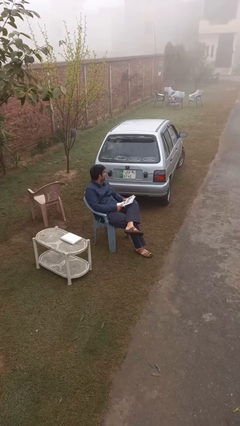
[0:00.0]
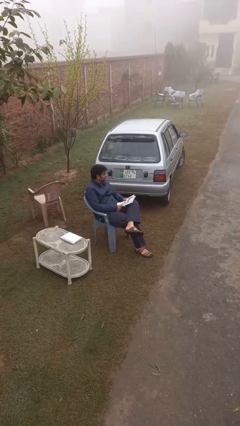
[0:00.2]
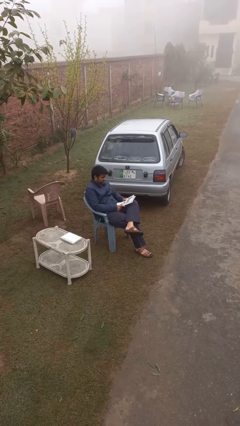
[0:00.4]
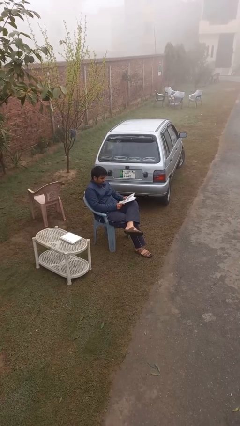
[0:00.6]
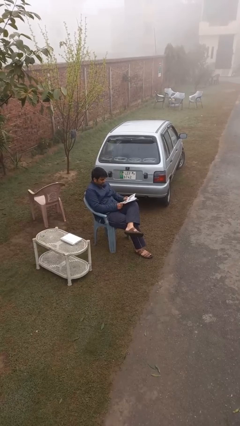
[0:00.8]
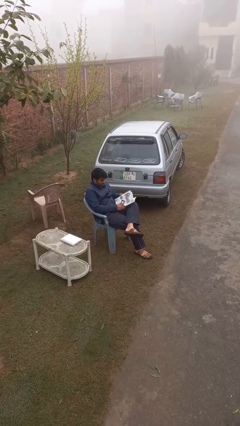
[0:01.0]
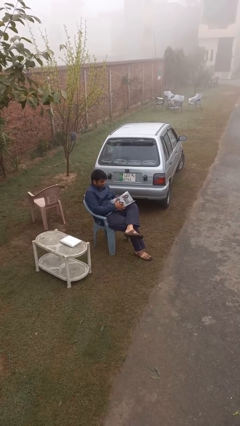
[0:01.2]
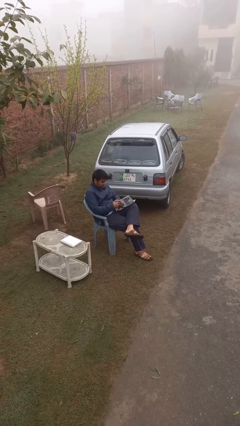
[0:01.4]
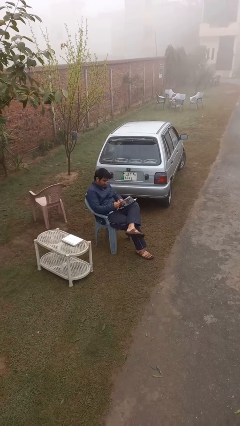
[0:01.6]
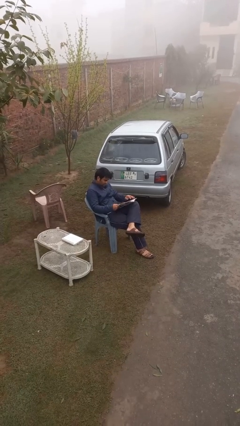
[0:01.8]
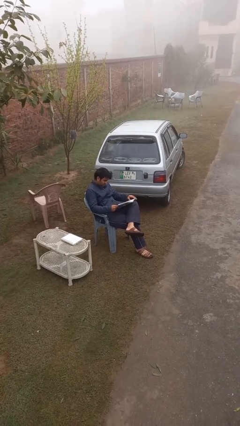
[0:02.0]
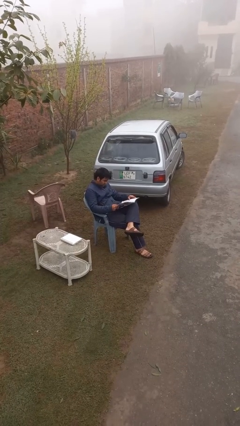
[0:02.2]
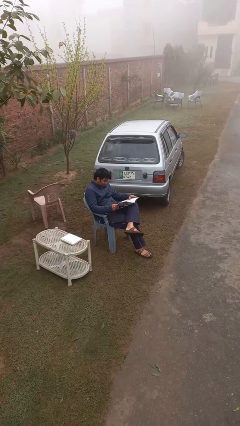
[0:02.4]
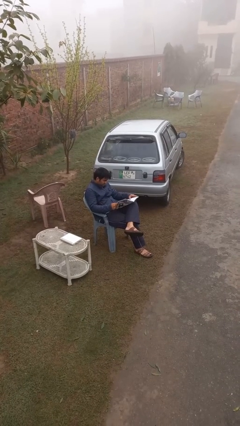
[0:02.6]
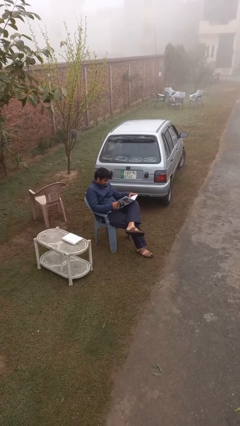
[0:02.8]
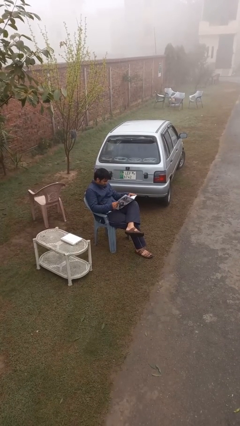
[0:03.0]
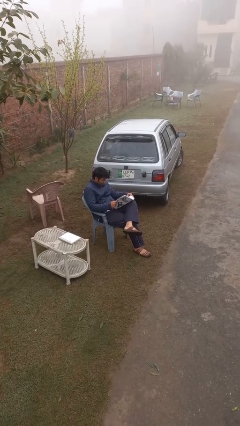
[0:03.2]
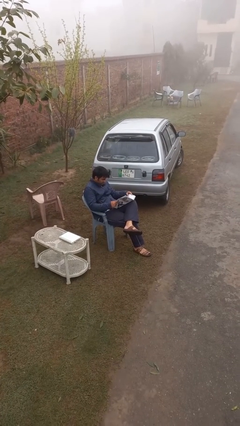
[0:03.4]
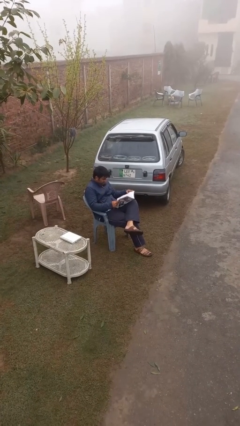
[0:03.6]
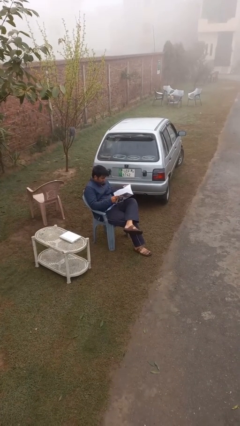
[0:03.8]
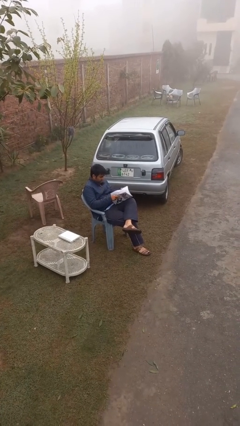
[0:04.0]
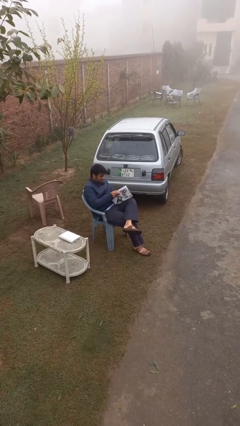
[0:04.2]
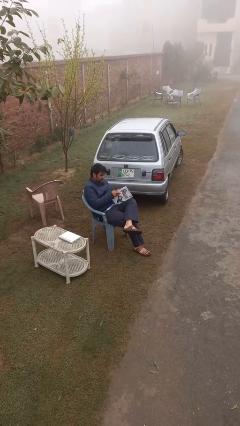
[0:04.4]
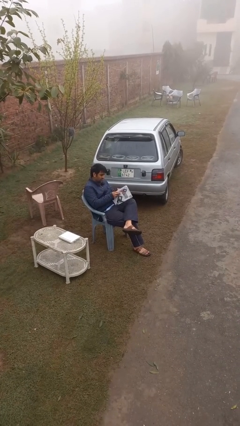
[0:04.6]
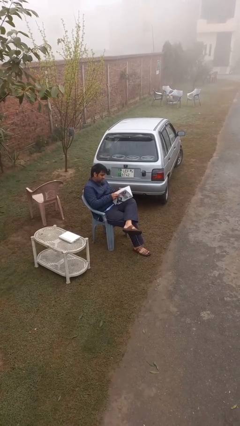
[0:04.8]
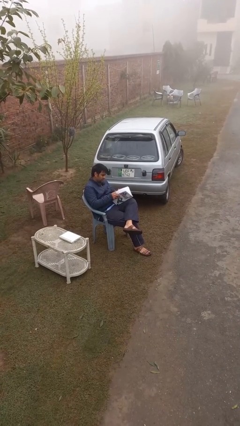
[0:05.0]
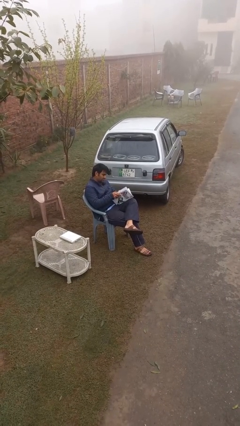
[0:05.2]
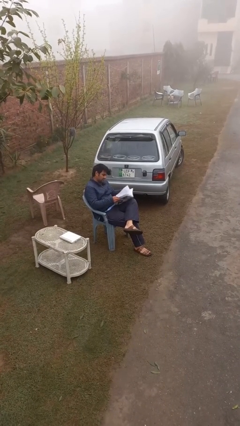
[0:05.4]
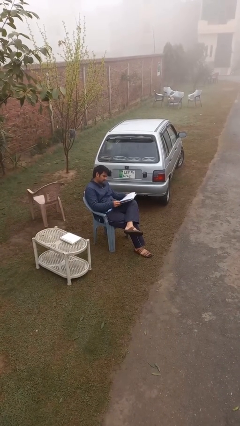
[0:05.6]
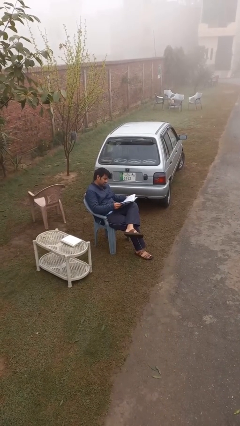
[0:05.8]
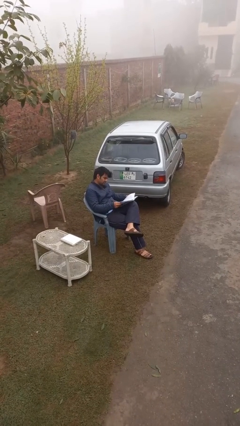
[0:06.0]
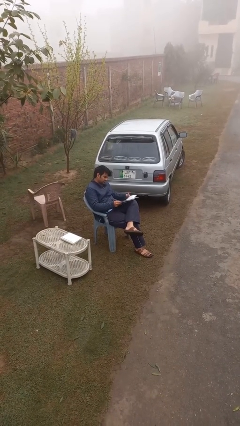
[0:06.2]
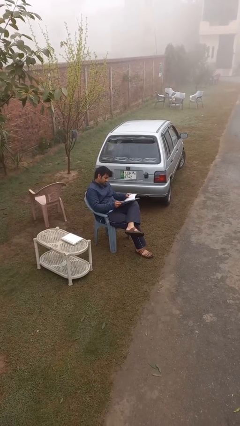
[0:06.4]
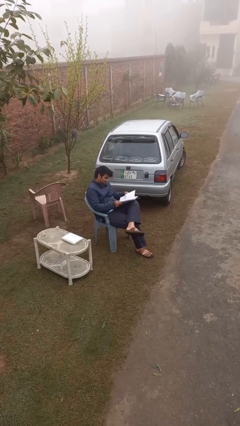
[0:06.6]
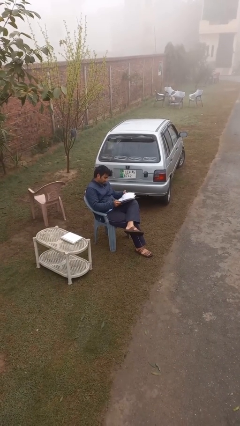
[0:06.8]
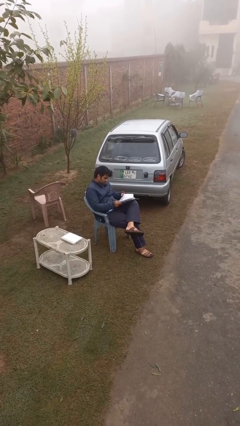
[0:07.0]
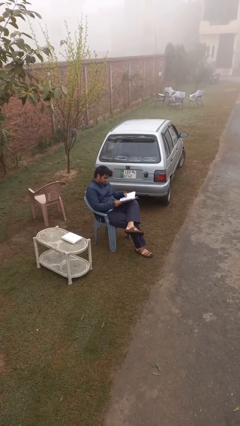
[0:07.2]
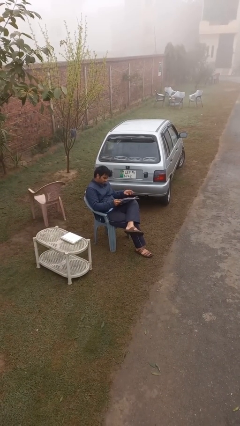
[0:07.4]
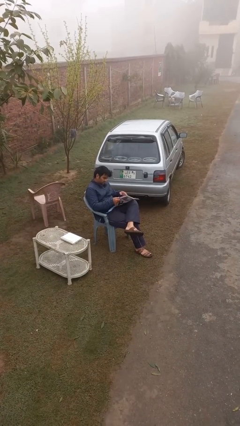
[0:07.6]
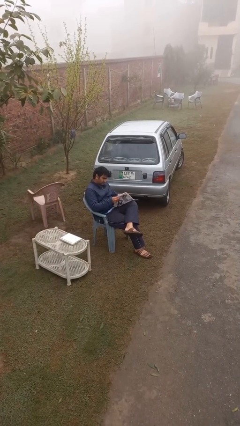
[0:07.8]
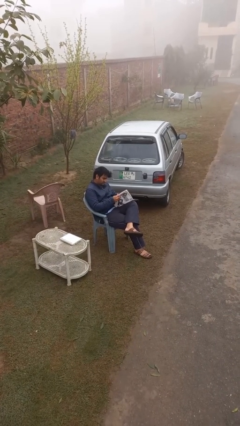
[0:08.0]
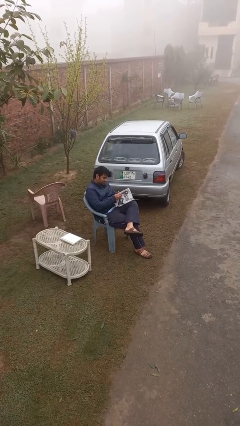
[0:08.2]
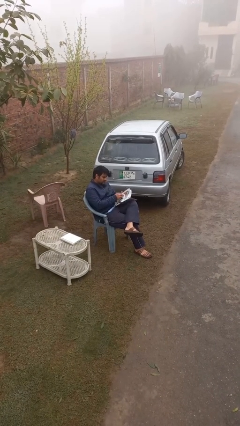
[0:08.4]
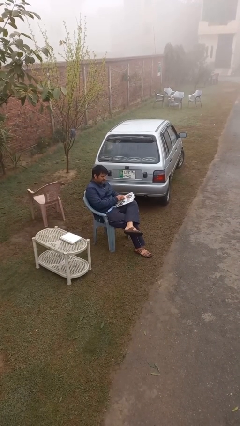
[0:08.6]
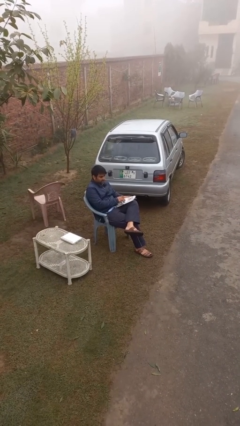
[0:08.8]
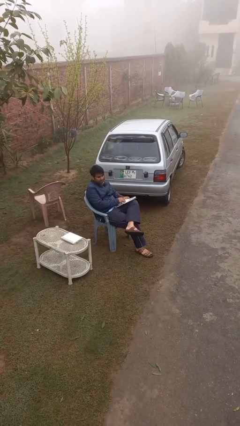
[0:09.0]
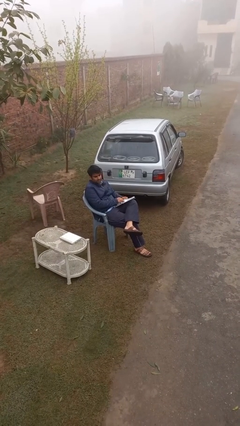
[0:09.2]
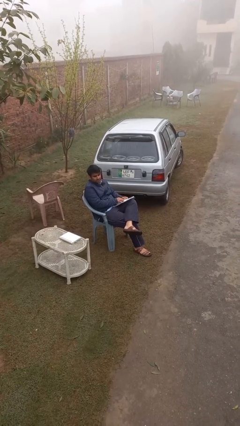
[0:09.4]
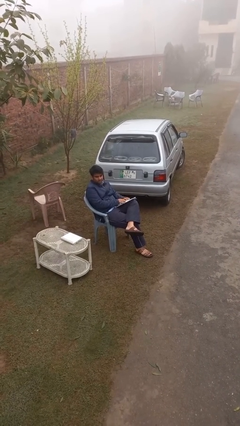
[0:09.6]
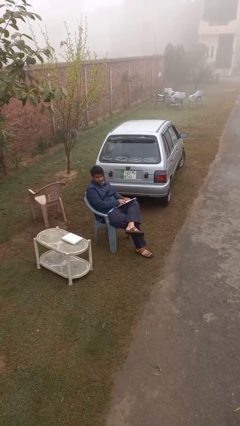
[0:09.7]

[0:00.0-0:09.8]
person reads document

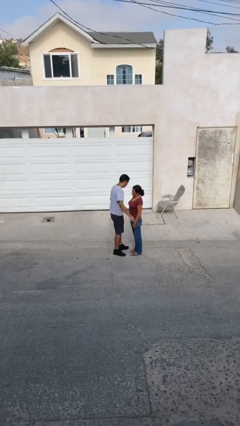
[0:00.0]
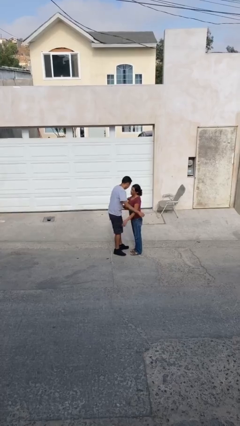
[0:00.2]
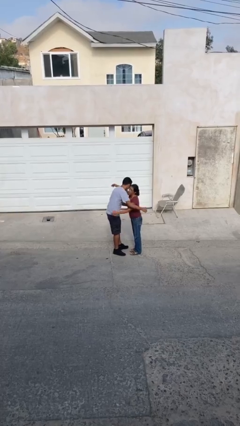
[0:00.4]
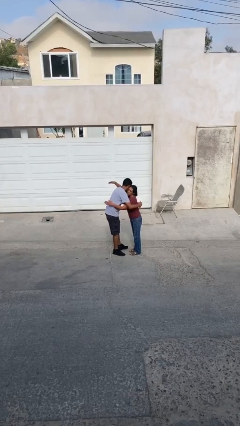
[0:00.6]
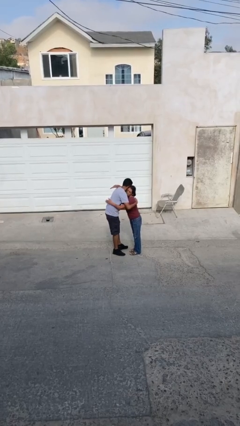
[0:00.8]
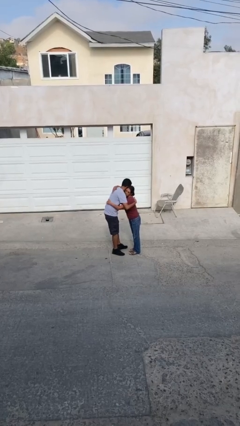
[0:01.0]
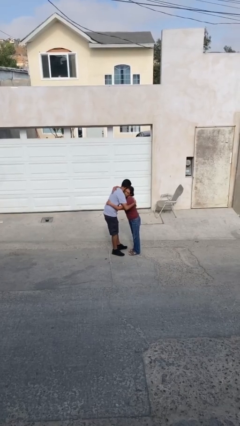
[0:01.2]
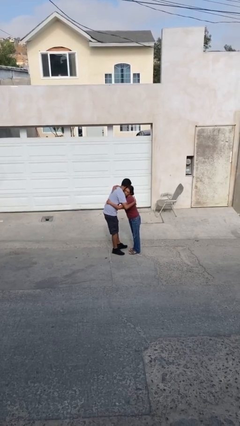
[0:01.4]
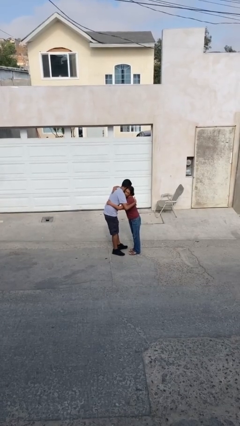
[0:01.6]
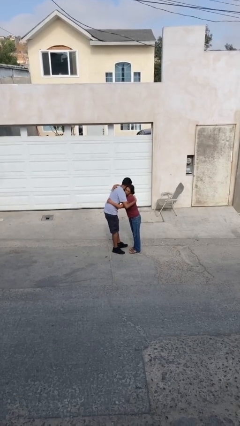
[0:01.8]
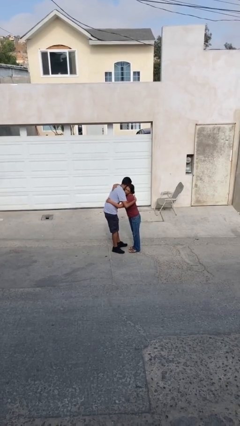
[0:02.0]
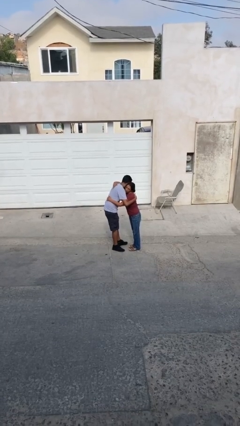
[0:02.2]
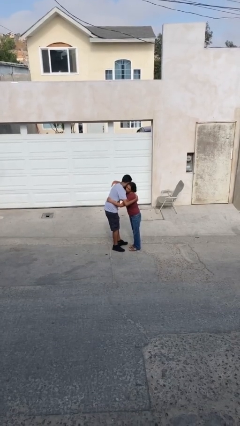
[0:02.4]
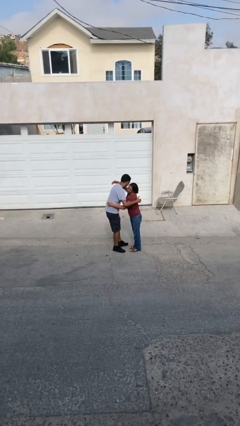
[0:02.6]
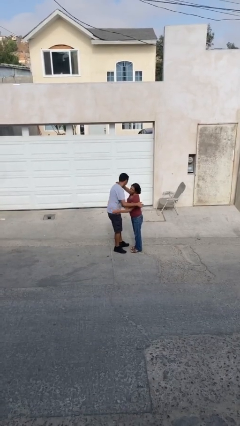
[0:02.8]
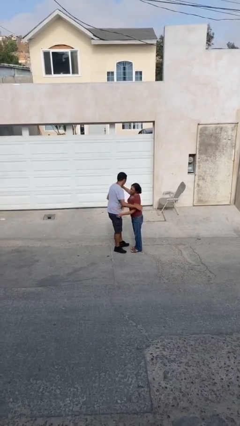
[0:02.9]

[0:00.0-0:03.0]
person embraces person

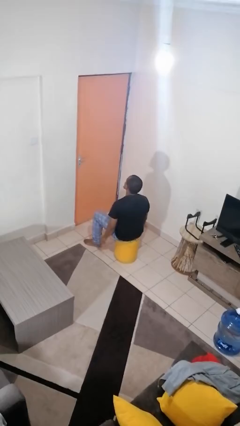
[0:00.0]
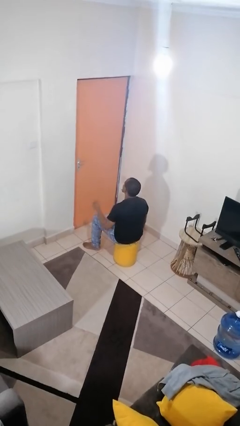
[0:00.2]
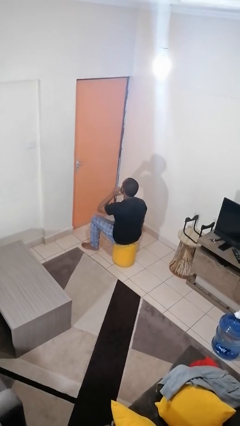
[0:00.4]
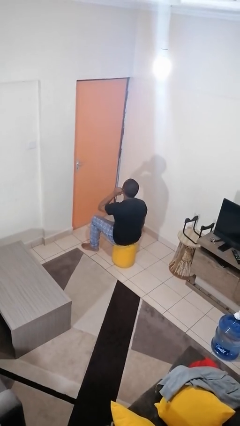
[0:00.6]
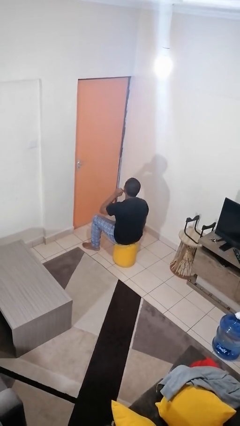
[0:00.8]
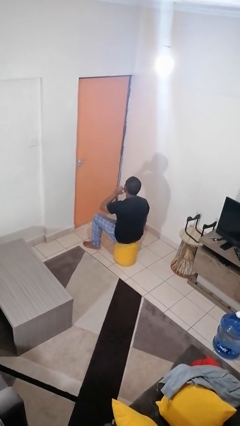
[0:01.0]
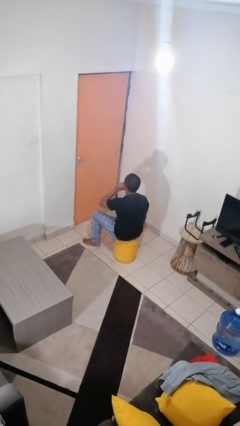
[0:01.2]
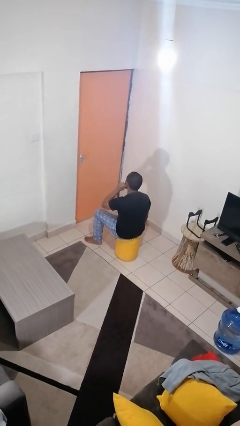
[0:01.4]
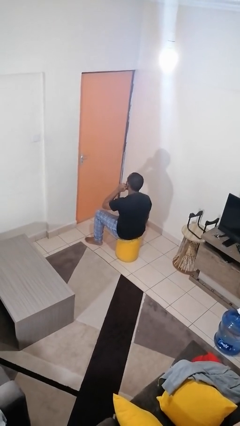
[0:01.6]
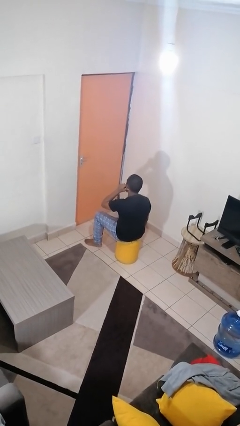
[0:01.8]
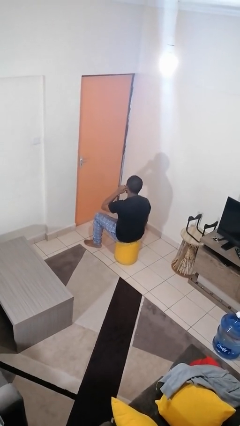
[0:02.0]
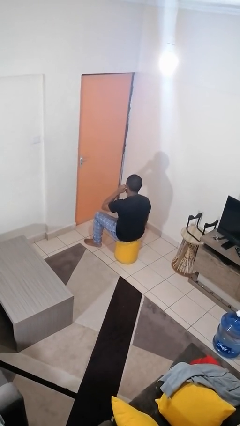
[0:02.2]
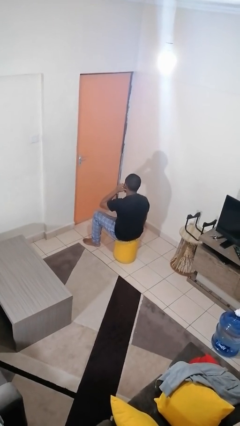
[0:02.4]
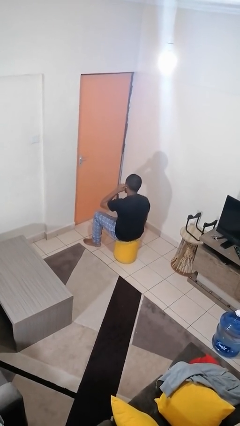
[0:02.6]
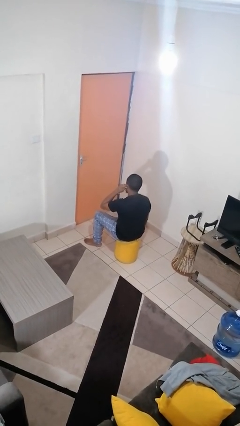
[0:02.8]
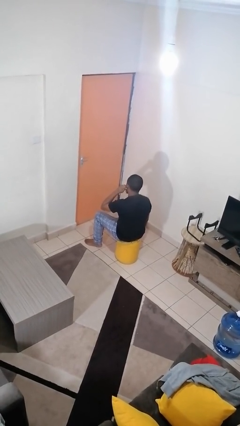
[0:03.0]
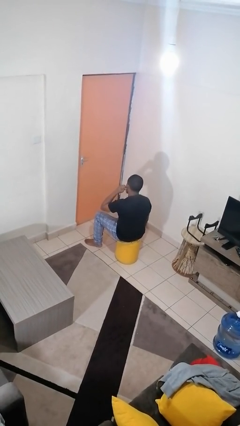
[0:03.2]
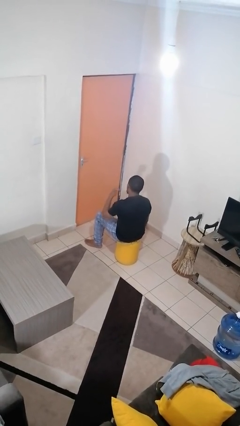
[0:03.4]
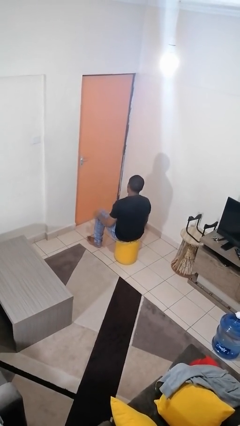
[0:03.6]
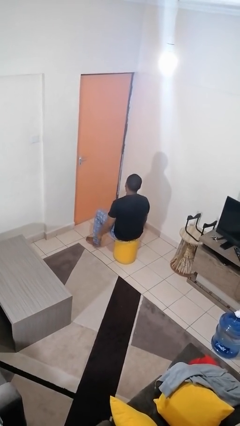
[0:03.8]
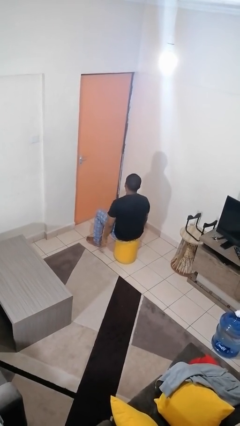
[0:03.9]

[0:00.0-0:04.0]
person touches earlobe

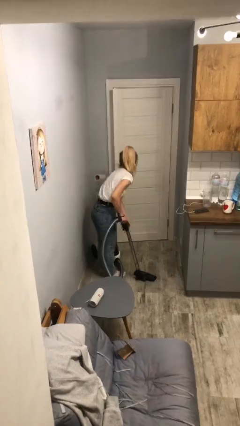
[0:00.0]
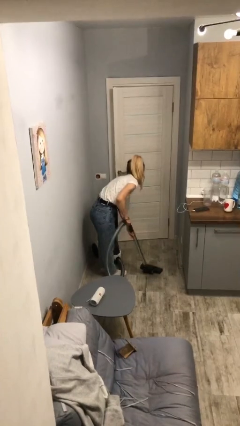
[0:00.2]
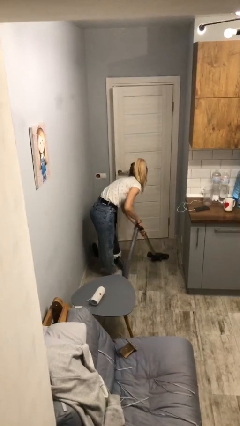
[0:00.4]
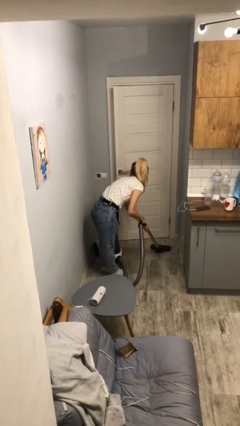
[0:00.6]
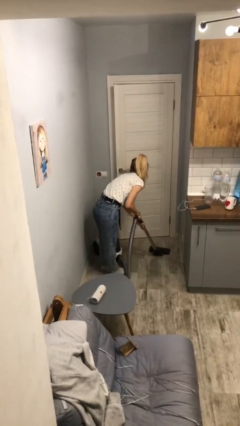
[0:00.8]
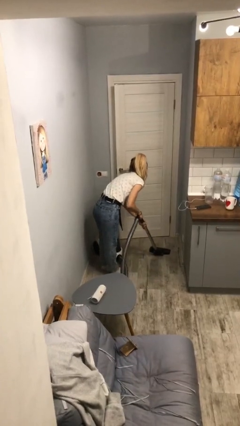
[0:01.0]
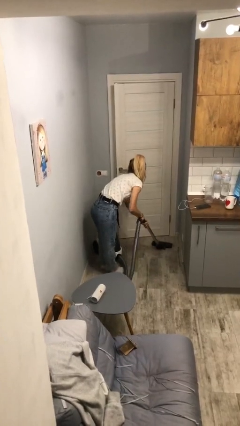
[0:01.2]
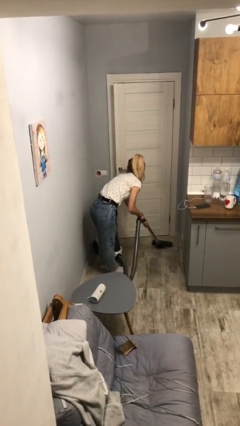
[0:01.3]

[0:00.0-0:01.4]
person vacuums carpet
